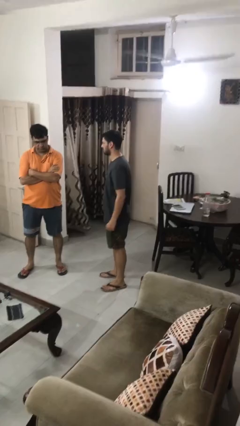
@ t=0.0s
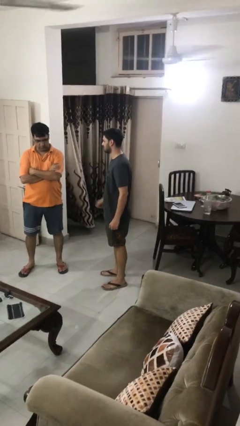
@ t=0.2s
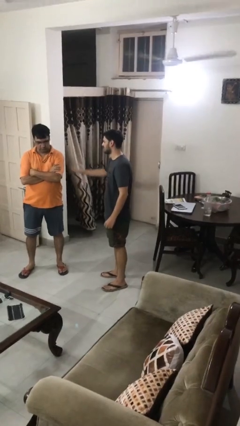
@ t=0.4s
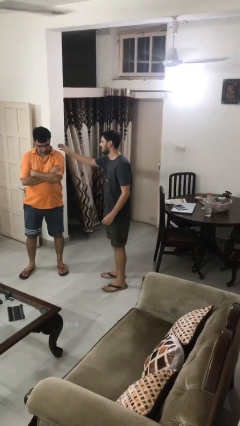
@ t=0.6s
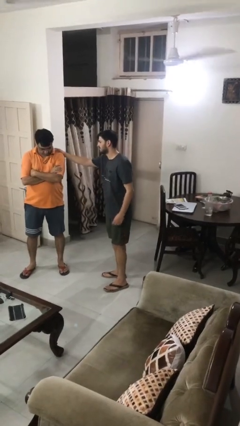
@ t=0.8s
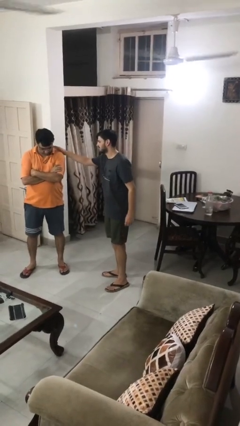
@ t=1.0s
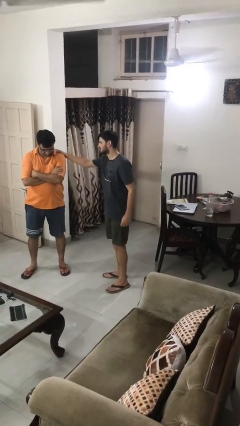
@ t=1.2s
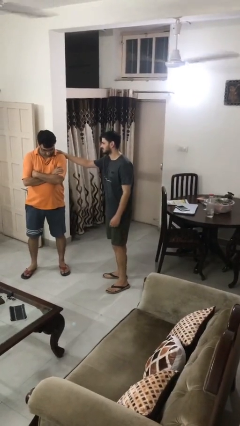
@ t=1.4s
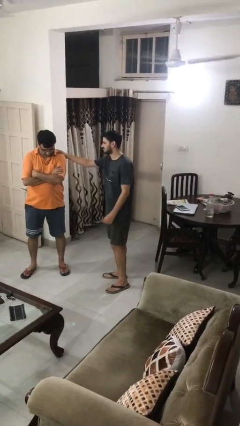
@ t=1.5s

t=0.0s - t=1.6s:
person pounds shoulders of person

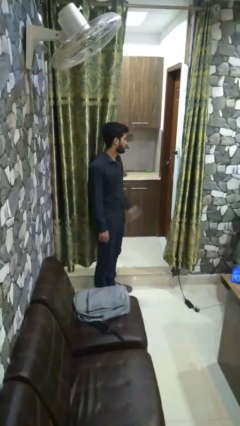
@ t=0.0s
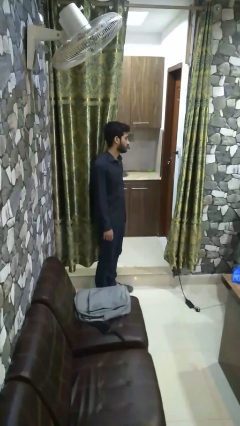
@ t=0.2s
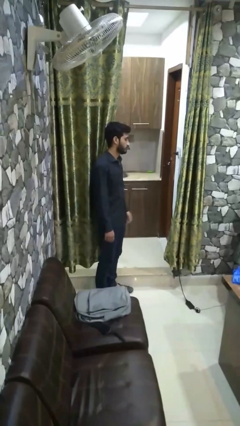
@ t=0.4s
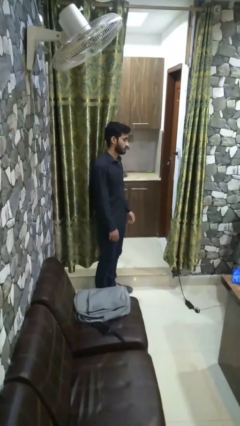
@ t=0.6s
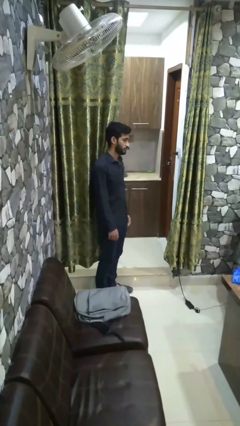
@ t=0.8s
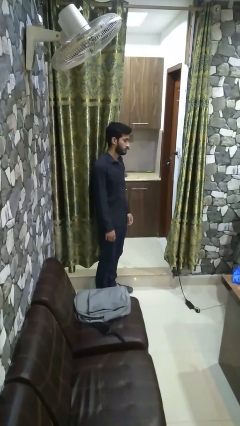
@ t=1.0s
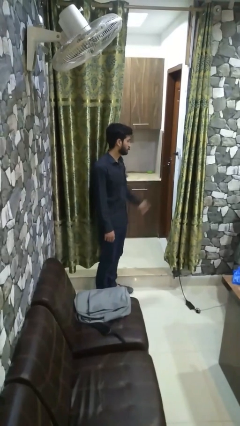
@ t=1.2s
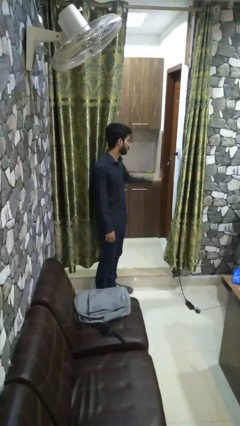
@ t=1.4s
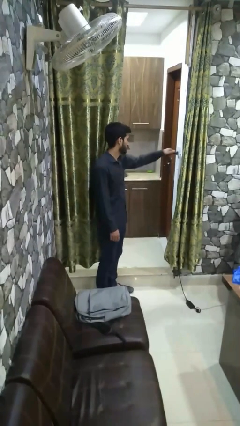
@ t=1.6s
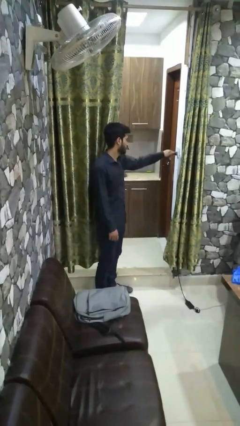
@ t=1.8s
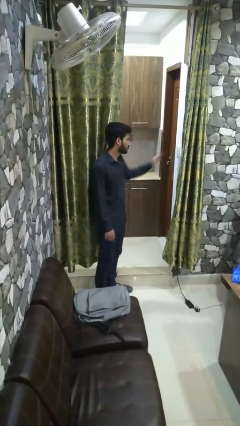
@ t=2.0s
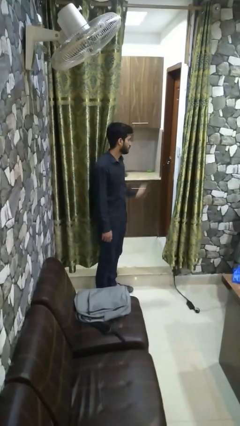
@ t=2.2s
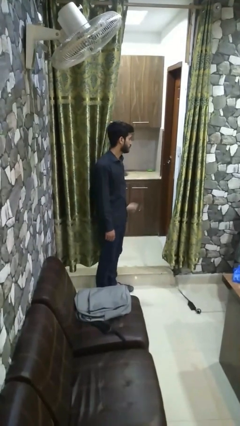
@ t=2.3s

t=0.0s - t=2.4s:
person unplugs from electrical socket

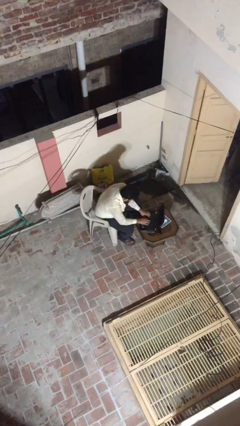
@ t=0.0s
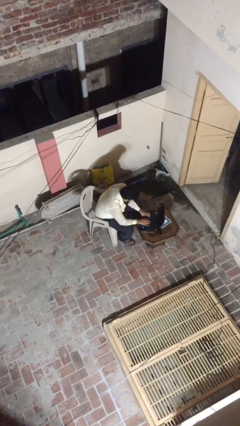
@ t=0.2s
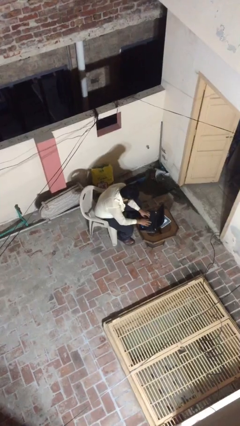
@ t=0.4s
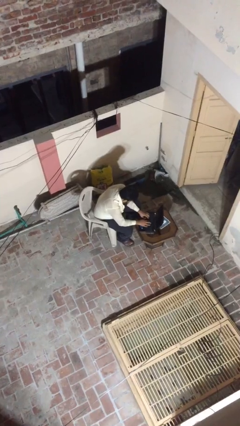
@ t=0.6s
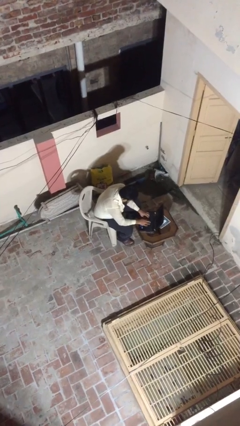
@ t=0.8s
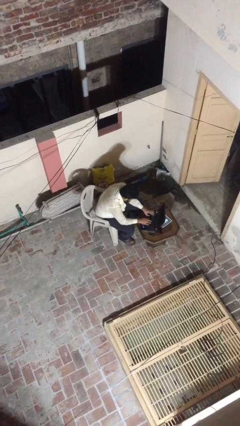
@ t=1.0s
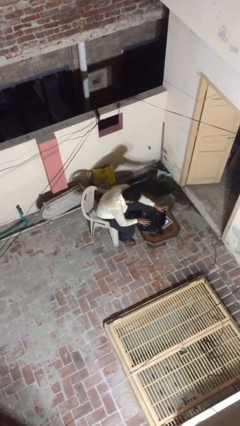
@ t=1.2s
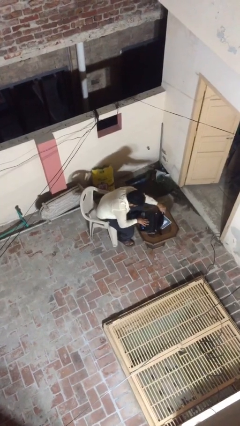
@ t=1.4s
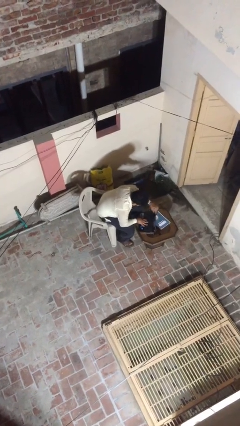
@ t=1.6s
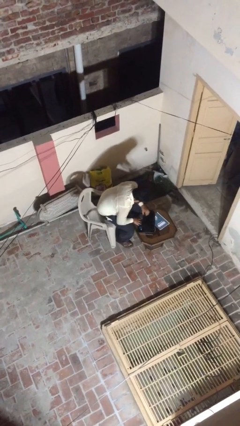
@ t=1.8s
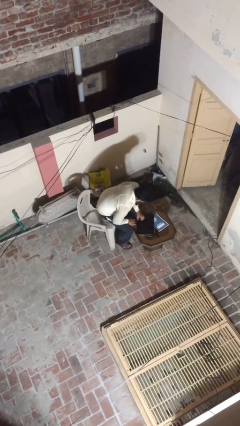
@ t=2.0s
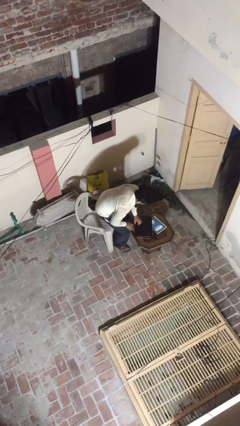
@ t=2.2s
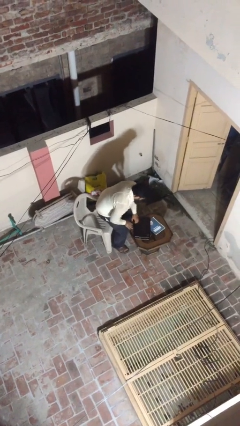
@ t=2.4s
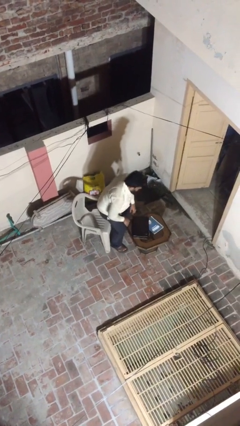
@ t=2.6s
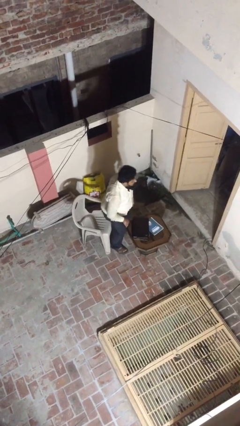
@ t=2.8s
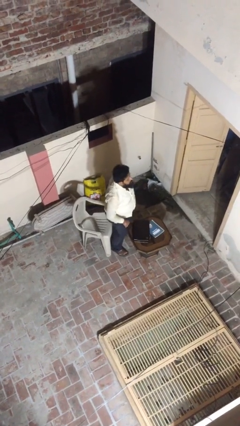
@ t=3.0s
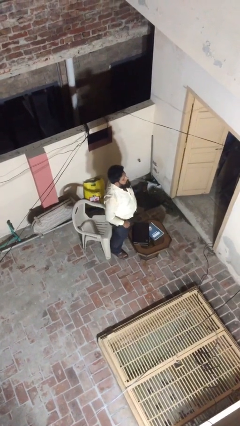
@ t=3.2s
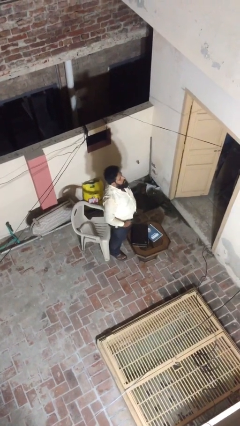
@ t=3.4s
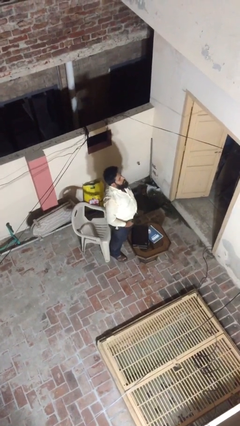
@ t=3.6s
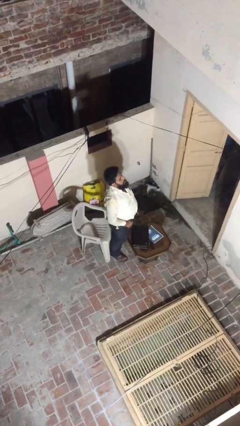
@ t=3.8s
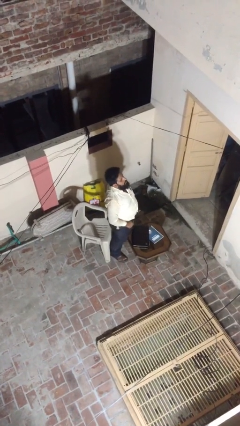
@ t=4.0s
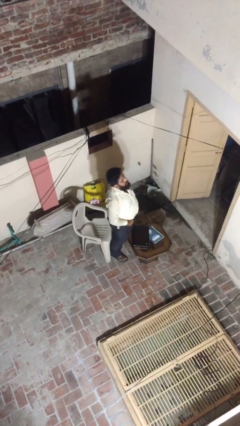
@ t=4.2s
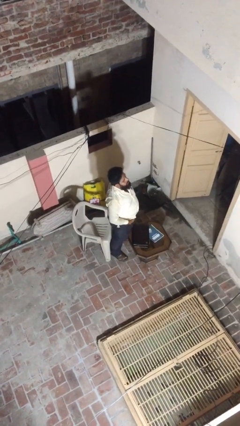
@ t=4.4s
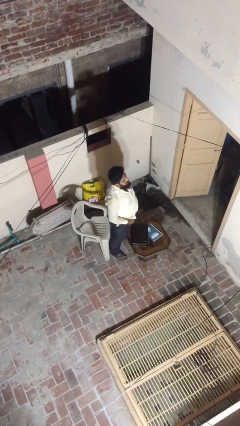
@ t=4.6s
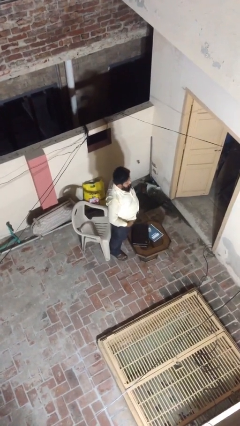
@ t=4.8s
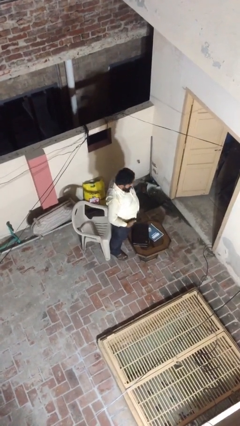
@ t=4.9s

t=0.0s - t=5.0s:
person stands up

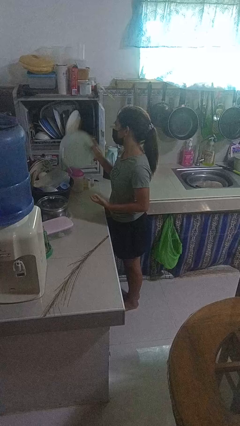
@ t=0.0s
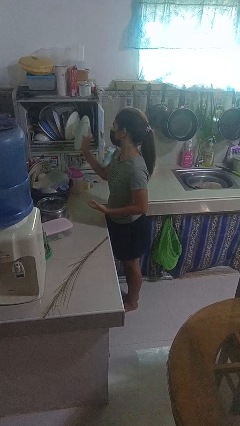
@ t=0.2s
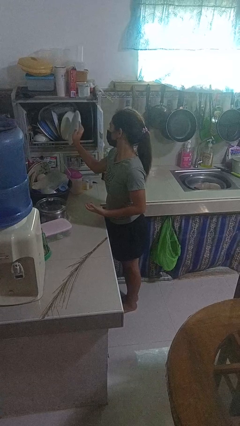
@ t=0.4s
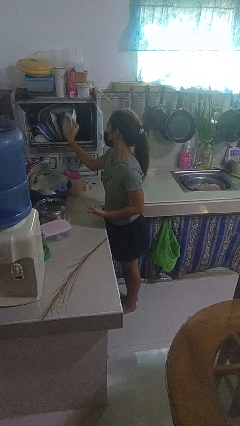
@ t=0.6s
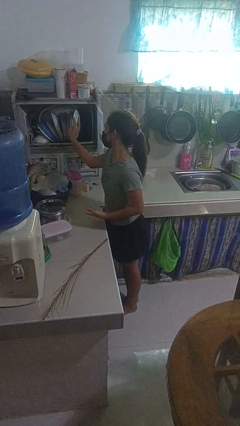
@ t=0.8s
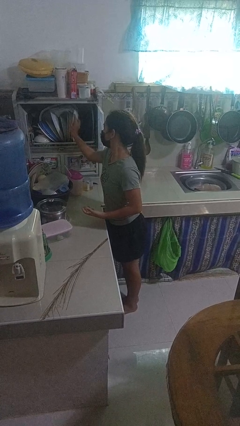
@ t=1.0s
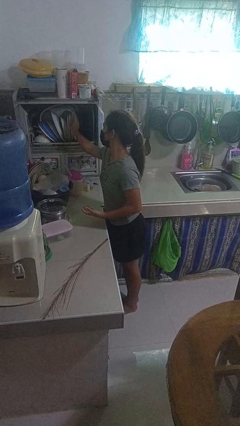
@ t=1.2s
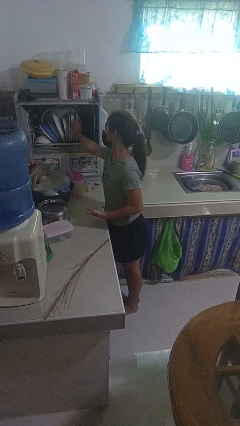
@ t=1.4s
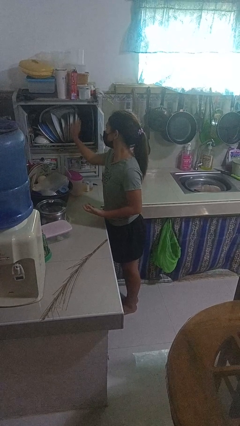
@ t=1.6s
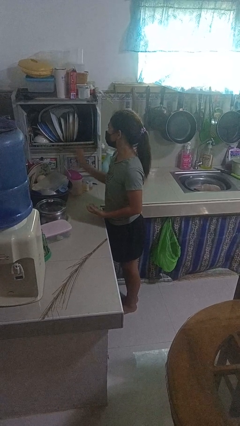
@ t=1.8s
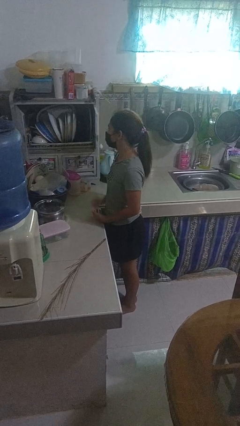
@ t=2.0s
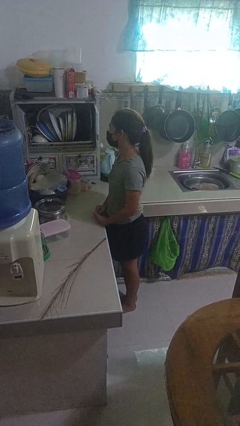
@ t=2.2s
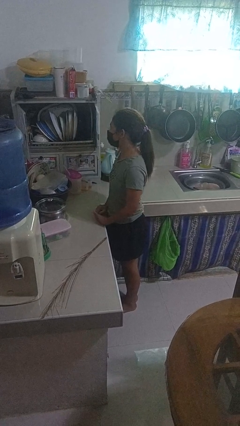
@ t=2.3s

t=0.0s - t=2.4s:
person puts object into kitchen drawer

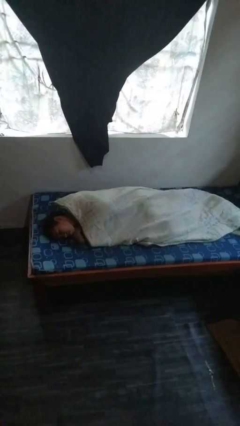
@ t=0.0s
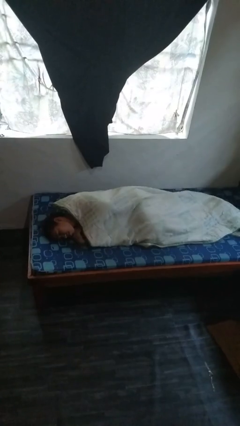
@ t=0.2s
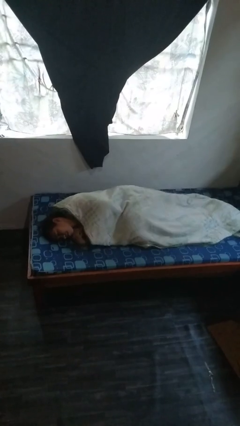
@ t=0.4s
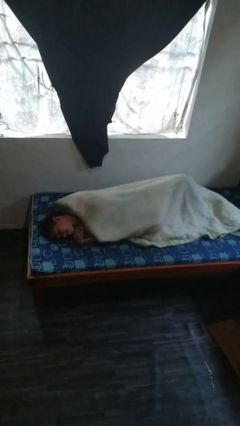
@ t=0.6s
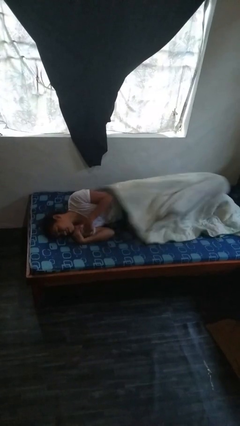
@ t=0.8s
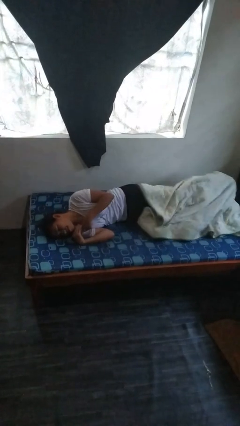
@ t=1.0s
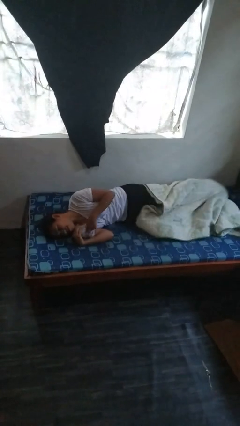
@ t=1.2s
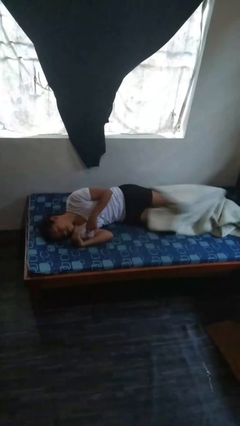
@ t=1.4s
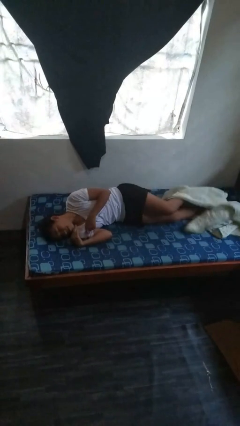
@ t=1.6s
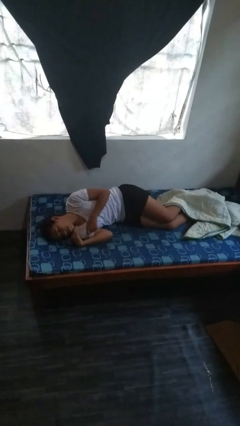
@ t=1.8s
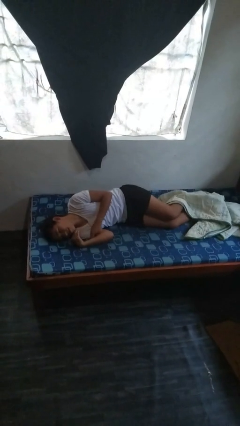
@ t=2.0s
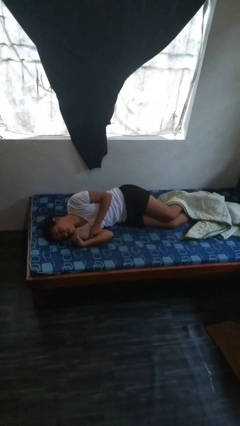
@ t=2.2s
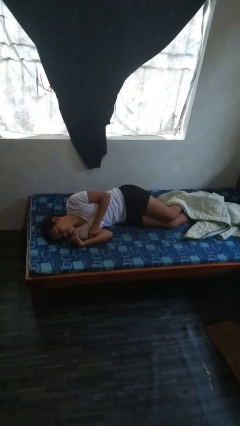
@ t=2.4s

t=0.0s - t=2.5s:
person uncovers with bedsheets

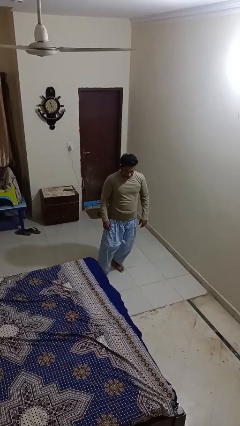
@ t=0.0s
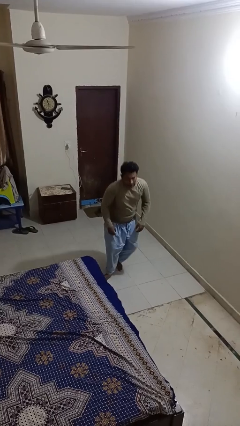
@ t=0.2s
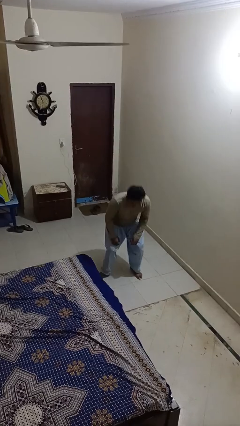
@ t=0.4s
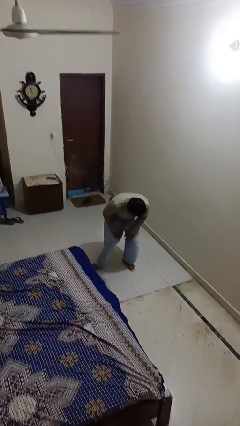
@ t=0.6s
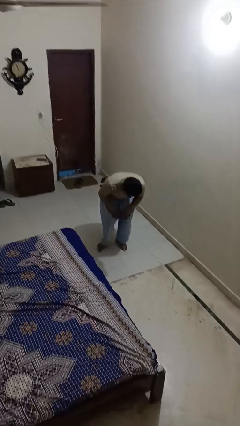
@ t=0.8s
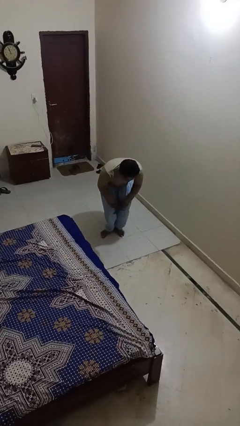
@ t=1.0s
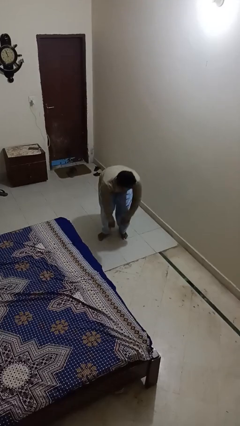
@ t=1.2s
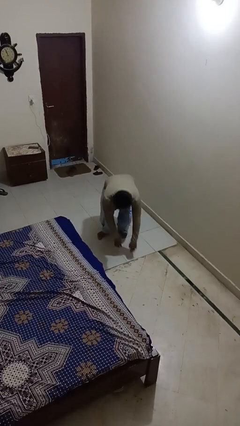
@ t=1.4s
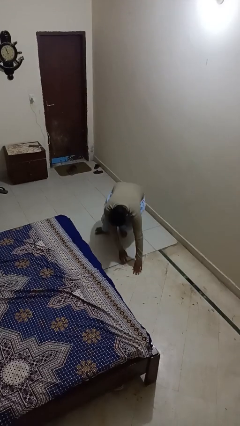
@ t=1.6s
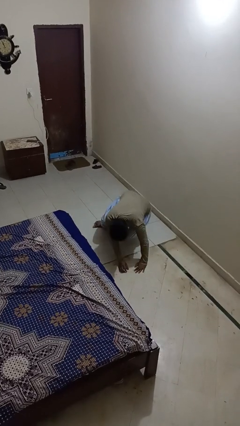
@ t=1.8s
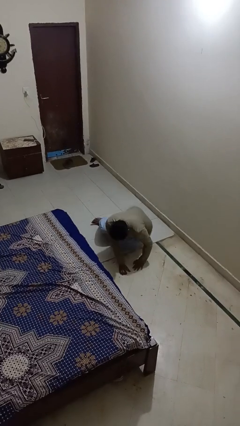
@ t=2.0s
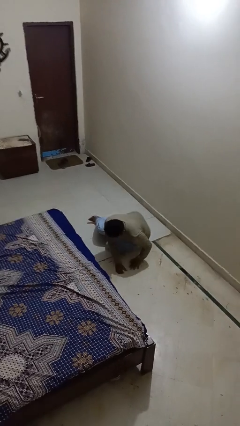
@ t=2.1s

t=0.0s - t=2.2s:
person trips on object on floor

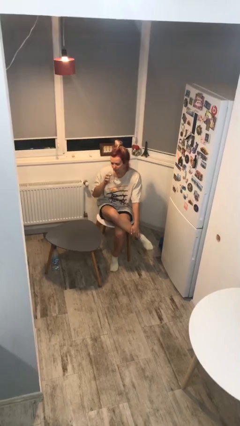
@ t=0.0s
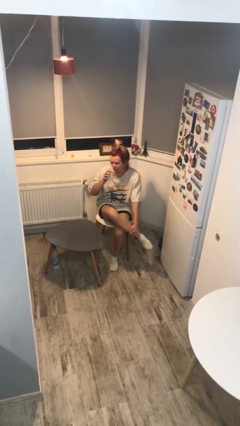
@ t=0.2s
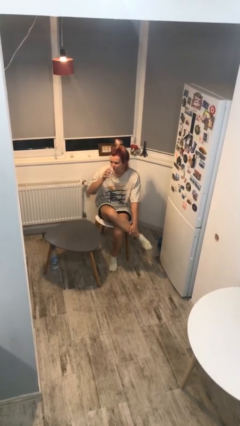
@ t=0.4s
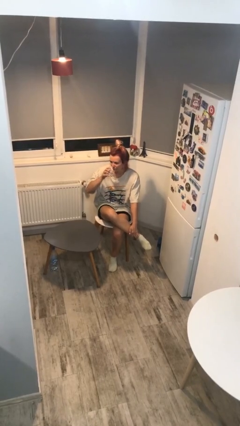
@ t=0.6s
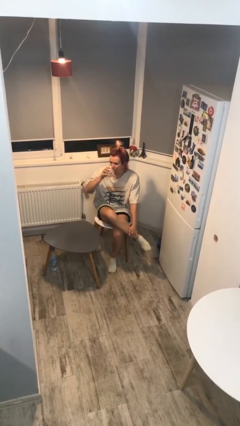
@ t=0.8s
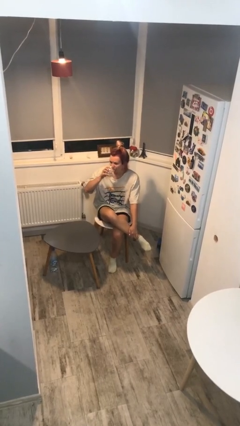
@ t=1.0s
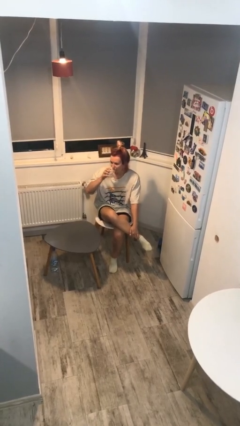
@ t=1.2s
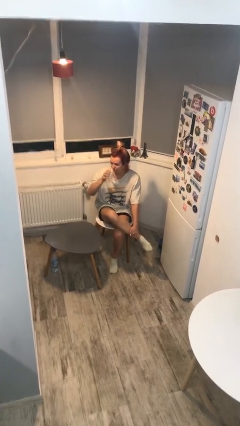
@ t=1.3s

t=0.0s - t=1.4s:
person drinks from mug
